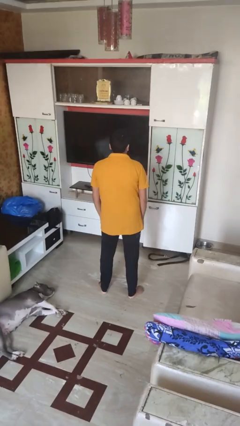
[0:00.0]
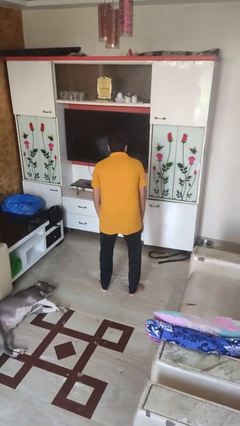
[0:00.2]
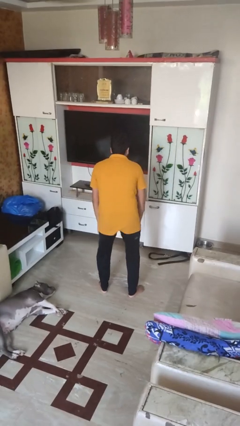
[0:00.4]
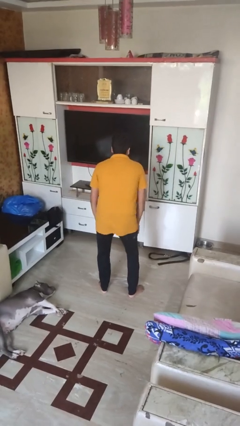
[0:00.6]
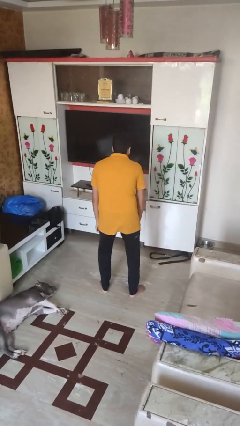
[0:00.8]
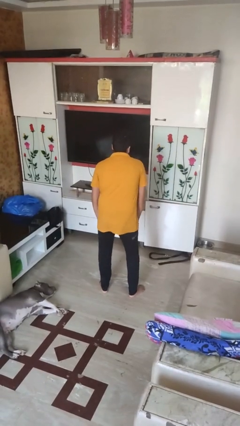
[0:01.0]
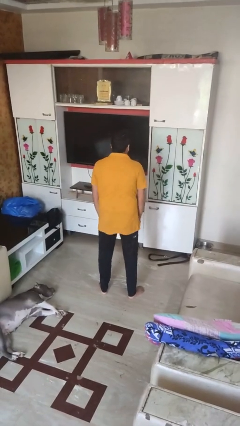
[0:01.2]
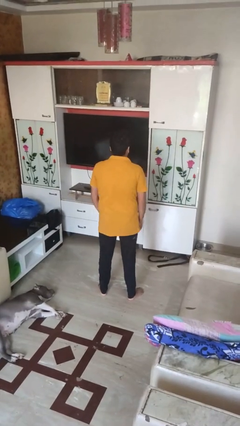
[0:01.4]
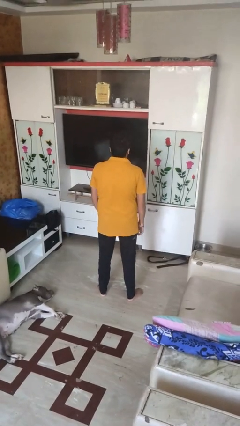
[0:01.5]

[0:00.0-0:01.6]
person wiggles hips

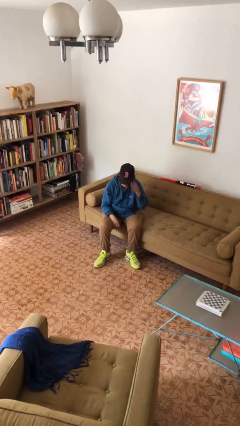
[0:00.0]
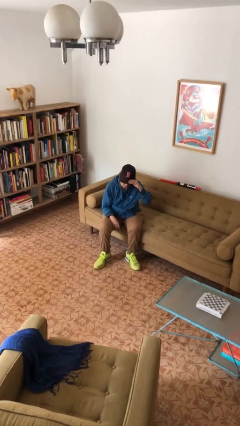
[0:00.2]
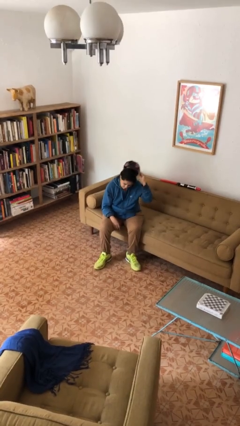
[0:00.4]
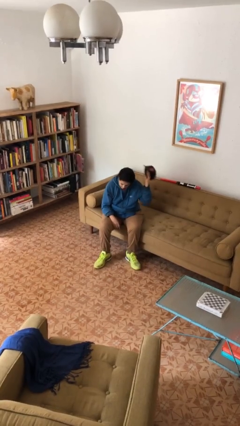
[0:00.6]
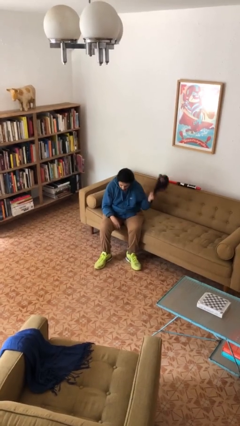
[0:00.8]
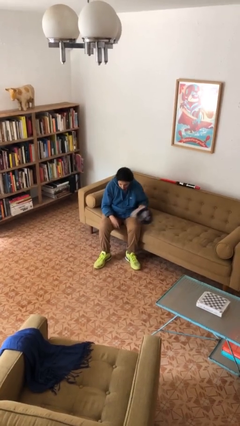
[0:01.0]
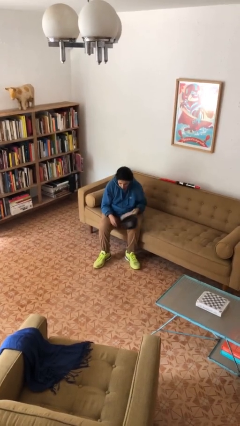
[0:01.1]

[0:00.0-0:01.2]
person takes off hat

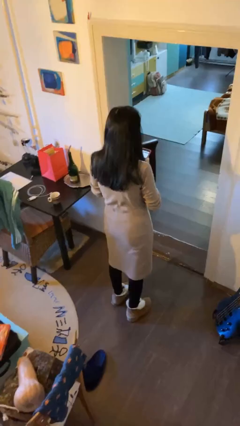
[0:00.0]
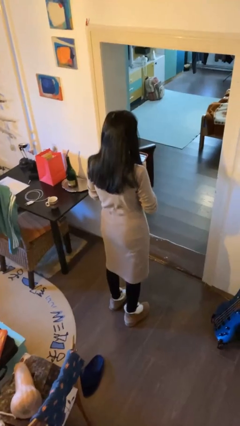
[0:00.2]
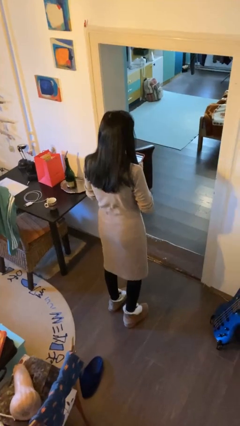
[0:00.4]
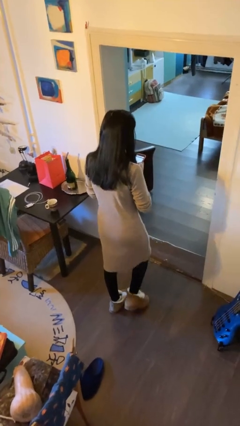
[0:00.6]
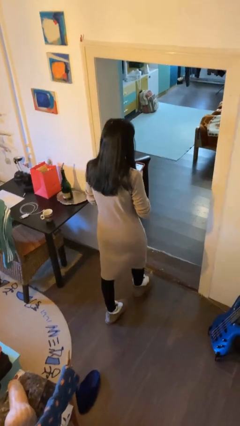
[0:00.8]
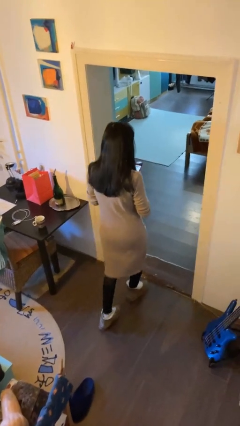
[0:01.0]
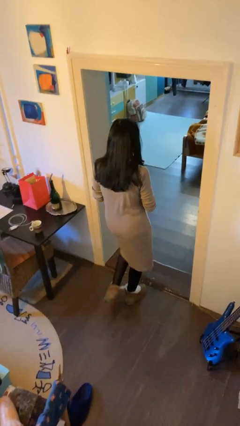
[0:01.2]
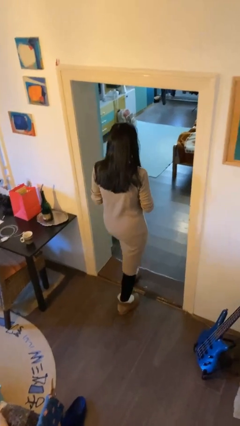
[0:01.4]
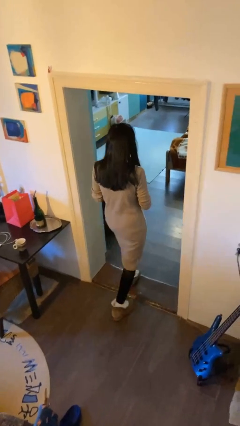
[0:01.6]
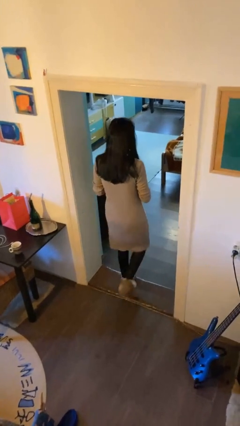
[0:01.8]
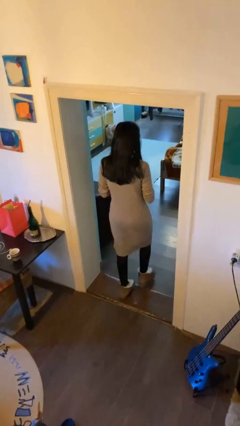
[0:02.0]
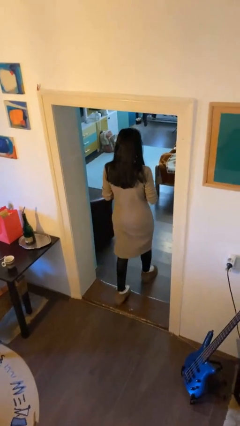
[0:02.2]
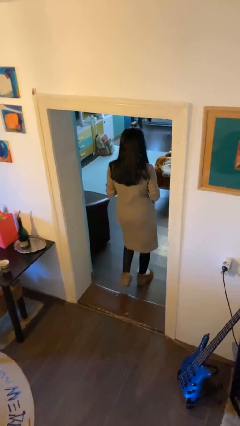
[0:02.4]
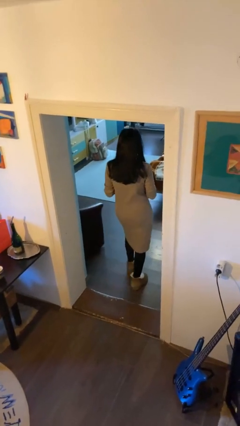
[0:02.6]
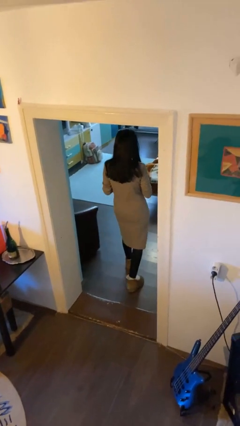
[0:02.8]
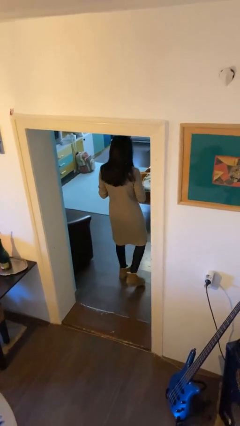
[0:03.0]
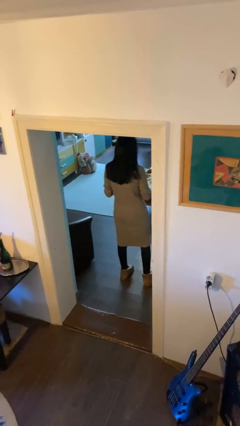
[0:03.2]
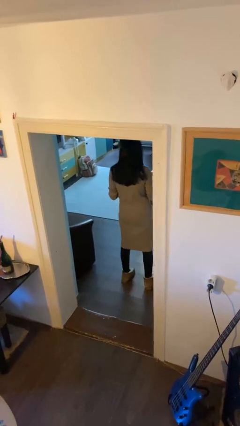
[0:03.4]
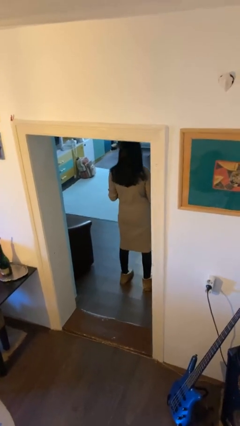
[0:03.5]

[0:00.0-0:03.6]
person exits scene through structure

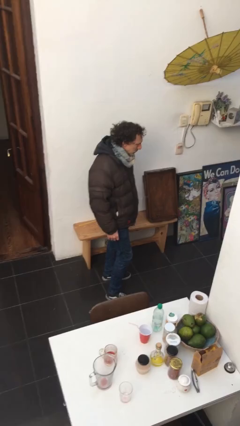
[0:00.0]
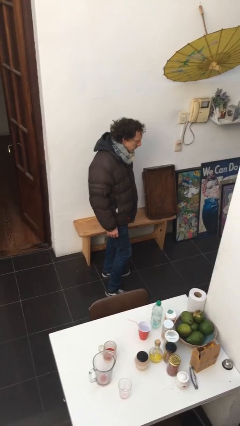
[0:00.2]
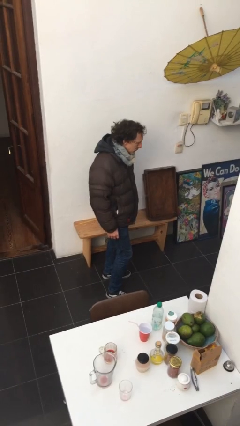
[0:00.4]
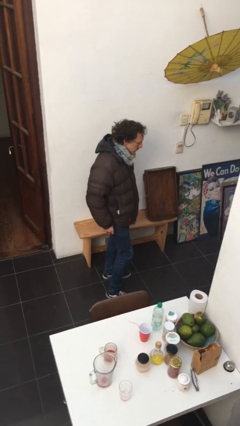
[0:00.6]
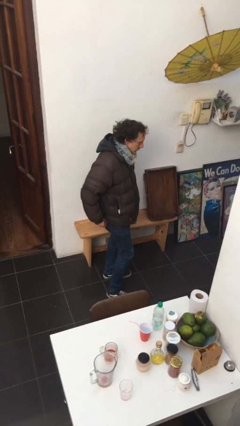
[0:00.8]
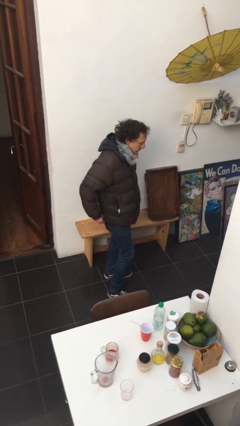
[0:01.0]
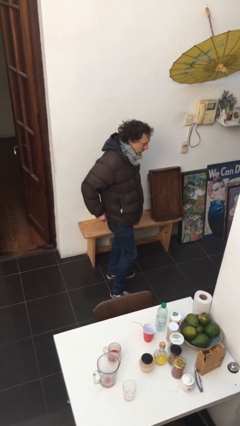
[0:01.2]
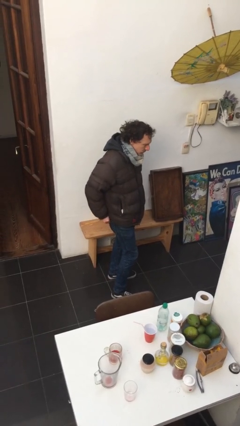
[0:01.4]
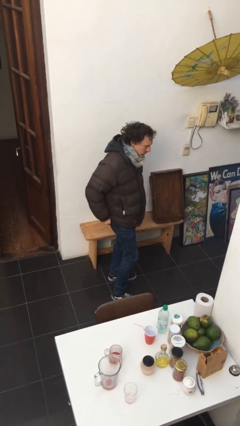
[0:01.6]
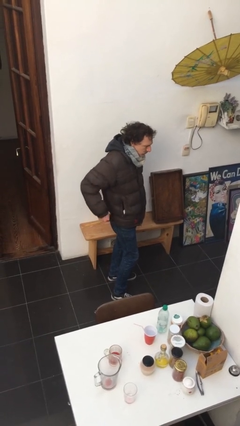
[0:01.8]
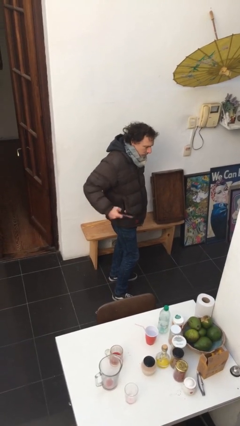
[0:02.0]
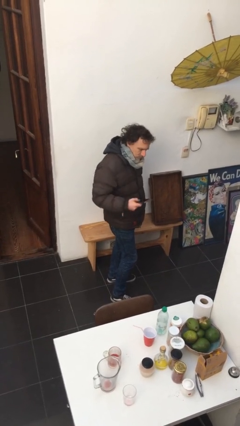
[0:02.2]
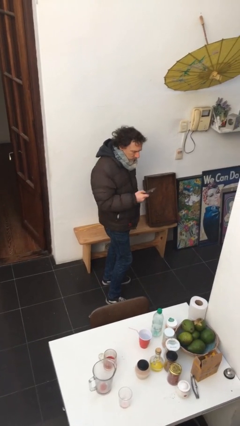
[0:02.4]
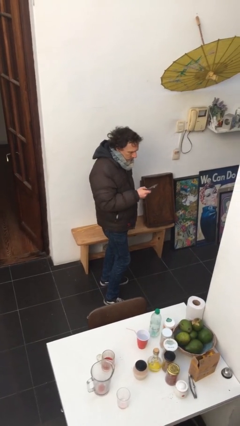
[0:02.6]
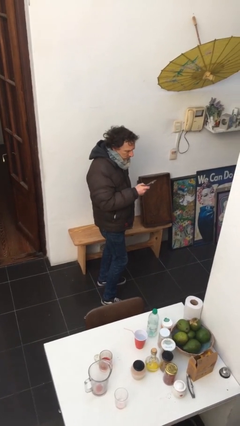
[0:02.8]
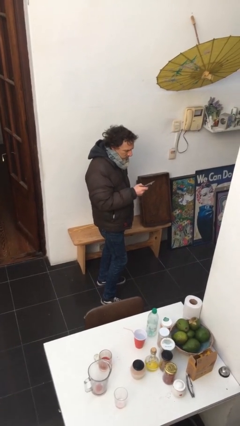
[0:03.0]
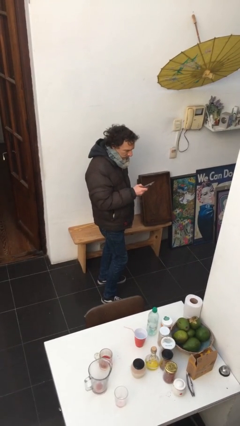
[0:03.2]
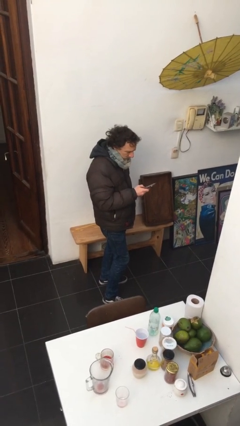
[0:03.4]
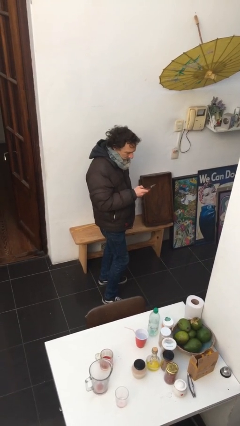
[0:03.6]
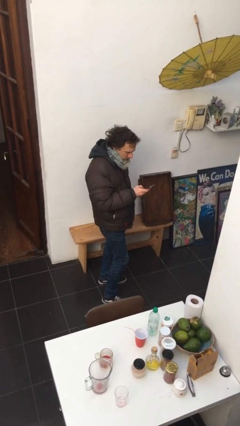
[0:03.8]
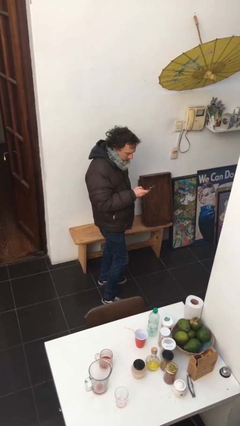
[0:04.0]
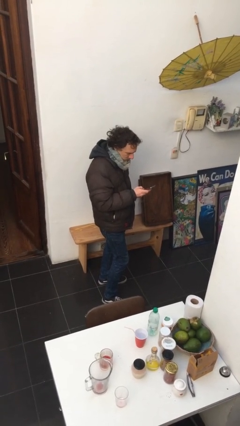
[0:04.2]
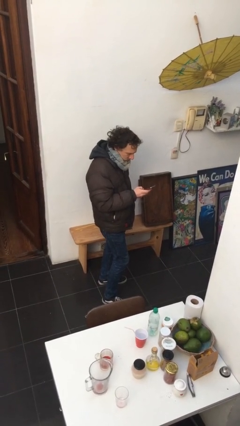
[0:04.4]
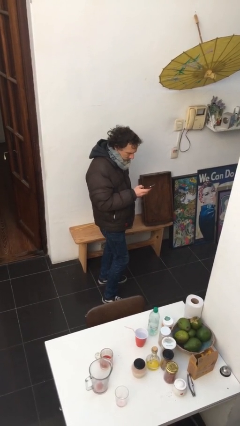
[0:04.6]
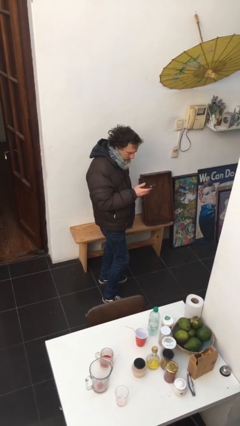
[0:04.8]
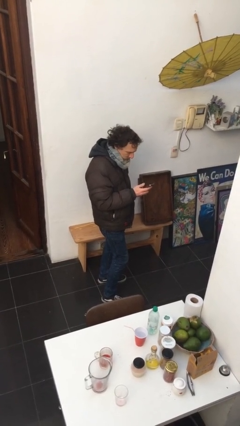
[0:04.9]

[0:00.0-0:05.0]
person takes phone from pocket

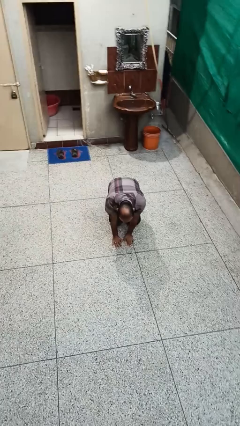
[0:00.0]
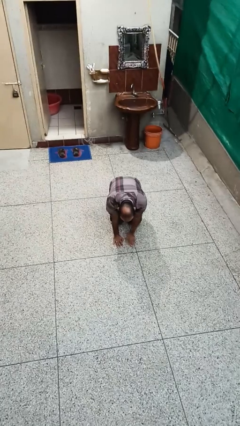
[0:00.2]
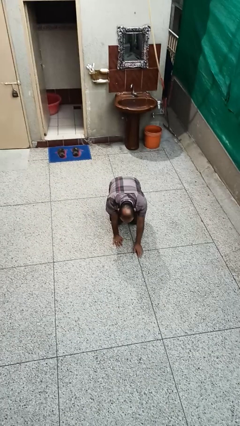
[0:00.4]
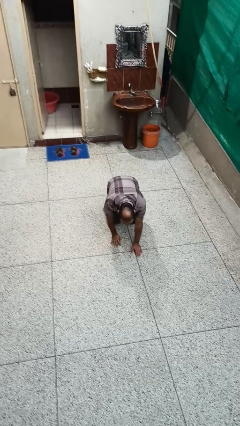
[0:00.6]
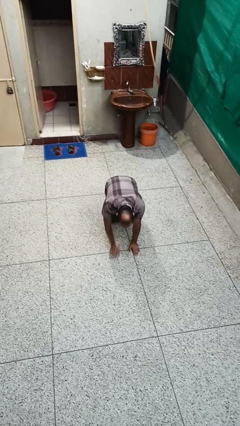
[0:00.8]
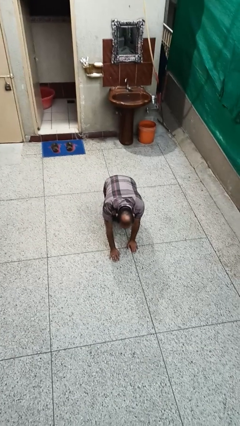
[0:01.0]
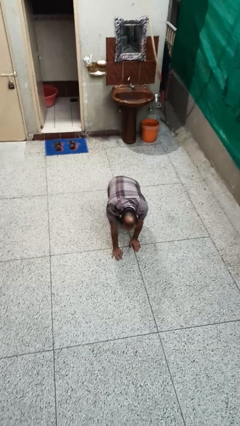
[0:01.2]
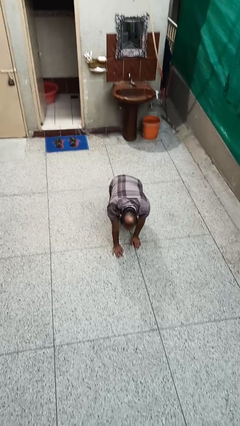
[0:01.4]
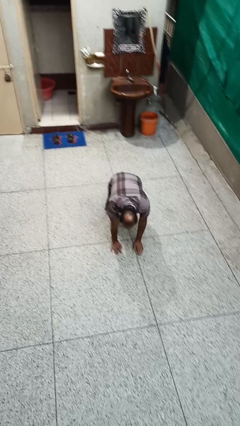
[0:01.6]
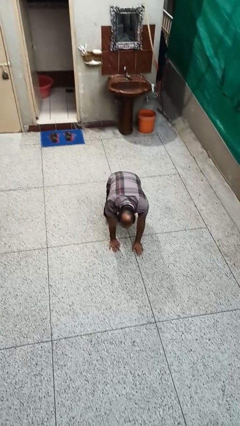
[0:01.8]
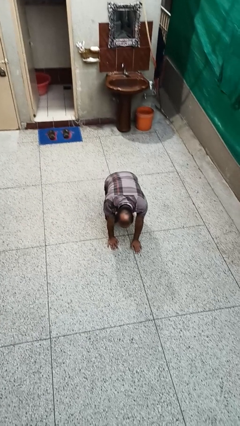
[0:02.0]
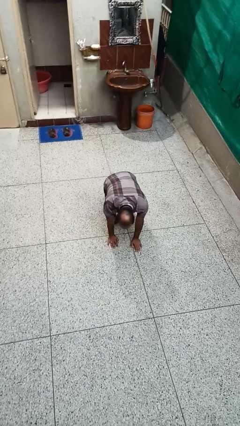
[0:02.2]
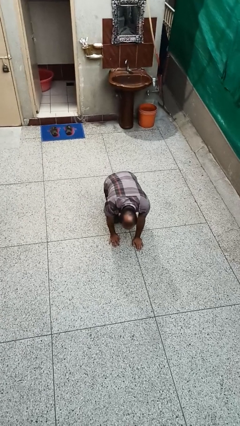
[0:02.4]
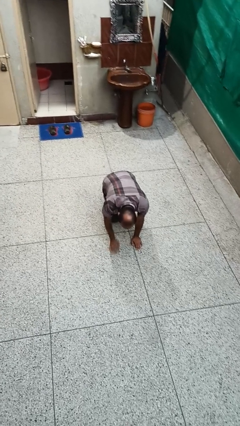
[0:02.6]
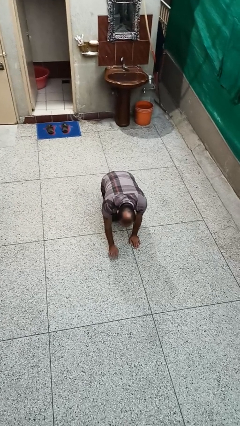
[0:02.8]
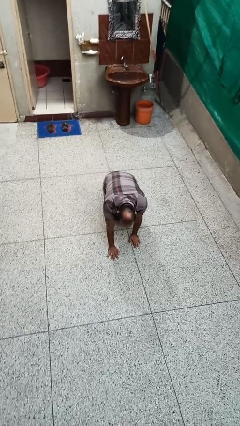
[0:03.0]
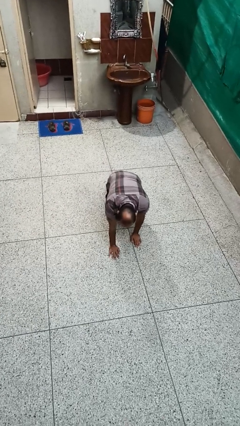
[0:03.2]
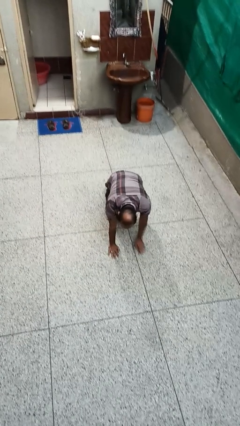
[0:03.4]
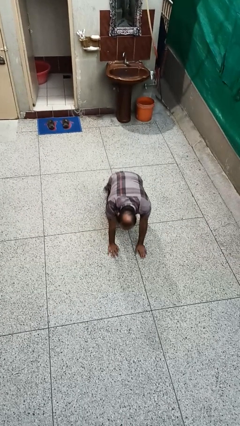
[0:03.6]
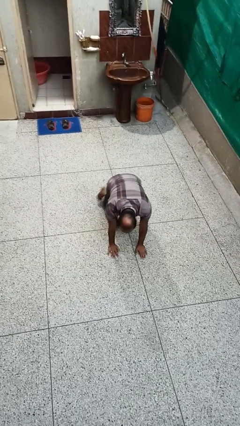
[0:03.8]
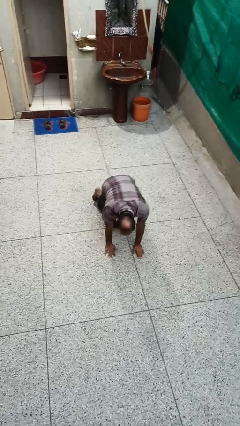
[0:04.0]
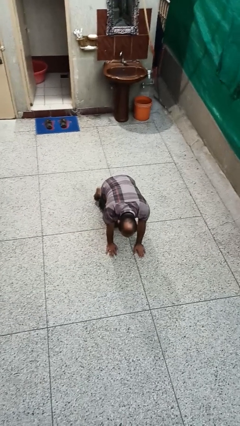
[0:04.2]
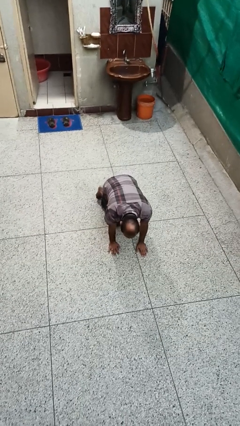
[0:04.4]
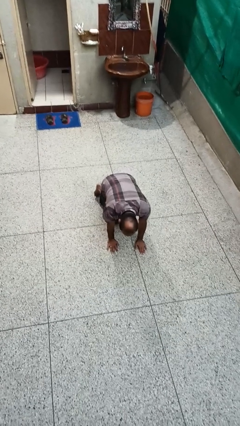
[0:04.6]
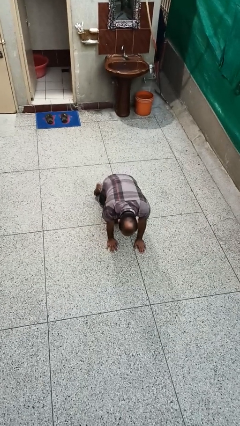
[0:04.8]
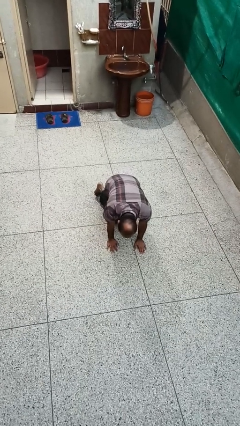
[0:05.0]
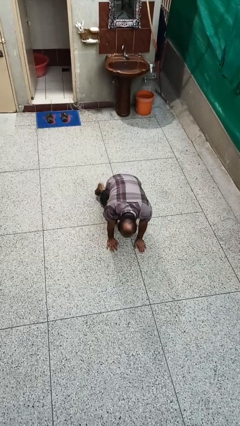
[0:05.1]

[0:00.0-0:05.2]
person crawls

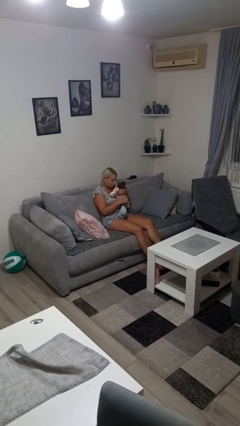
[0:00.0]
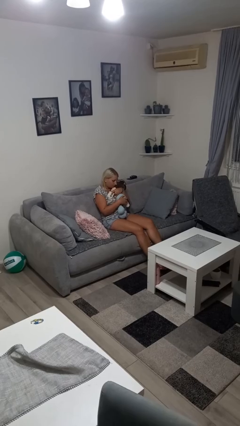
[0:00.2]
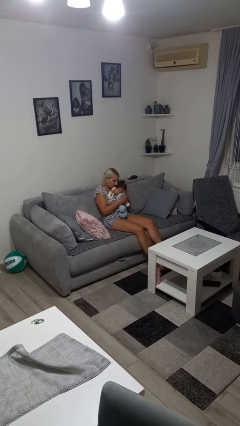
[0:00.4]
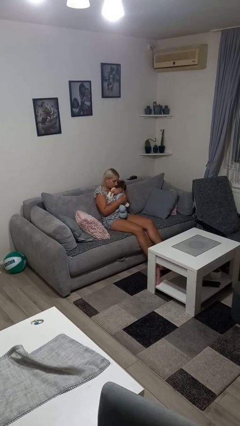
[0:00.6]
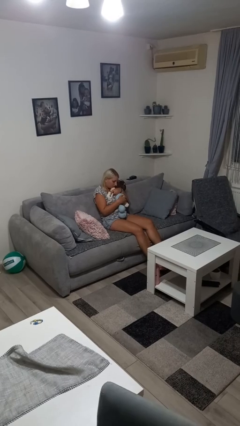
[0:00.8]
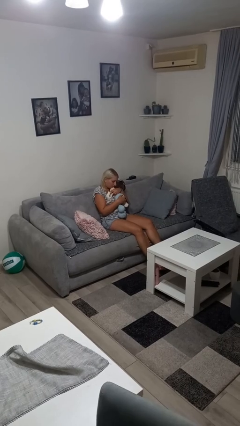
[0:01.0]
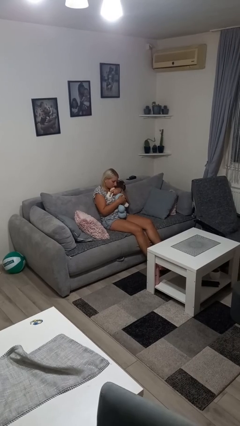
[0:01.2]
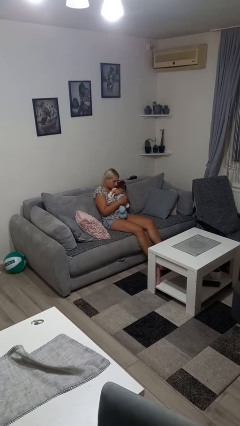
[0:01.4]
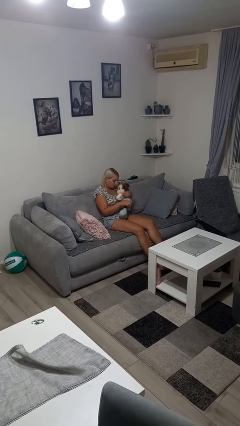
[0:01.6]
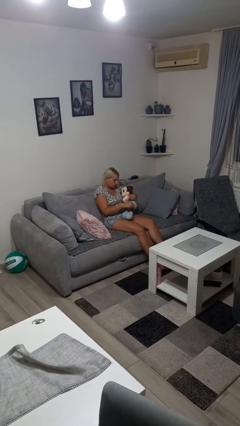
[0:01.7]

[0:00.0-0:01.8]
person hugs stuffed animal
